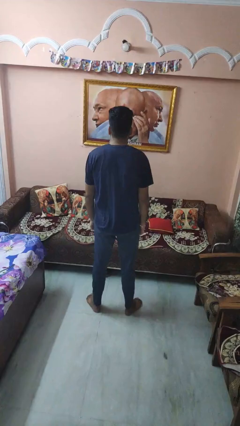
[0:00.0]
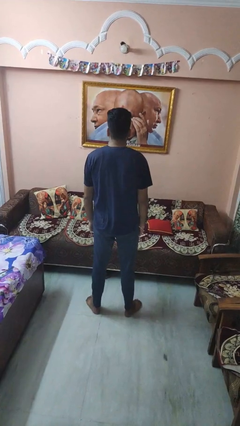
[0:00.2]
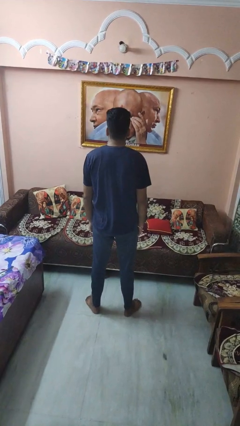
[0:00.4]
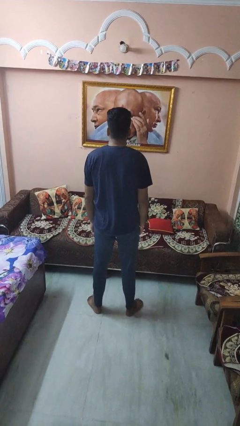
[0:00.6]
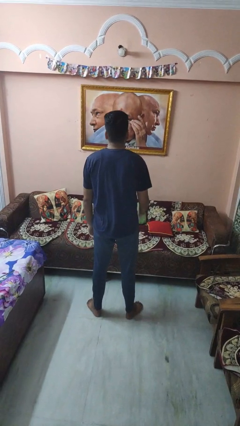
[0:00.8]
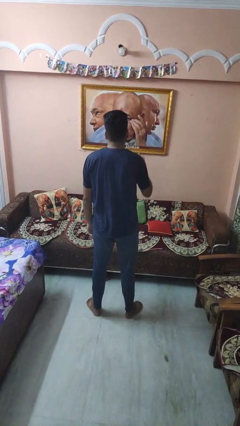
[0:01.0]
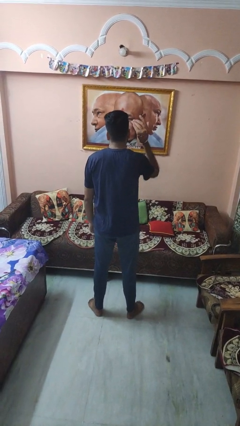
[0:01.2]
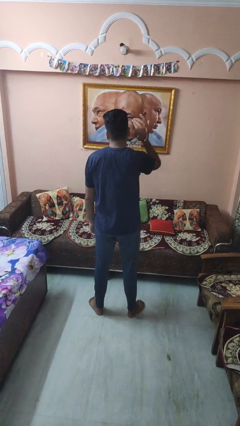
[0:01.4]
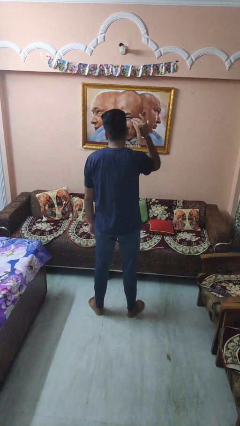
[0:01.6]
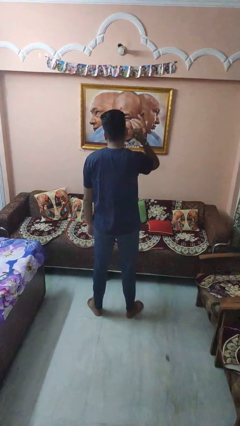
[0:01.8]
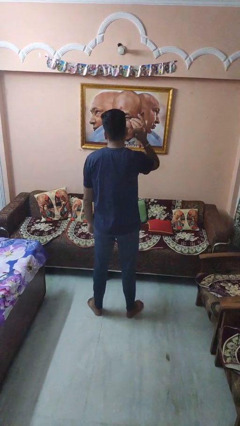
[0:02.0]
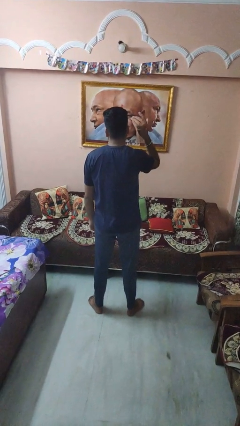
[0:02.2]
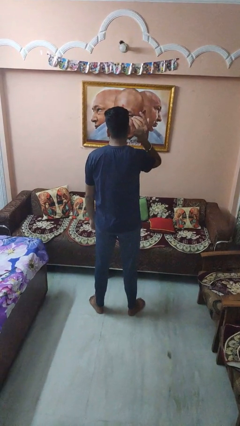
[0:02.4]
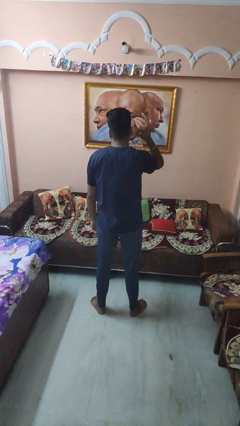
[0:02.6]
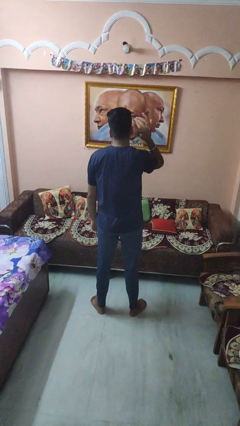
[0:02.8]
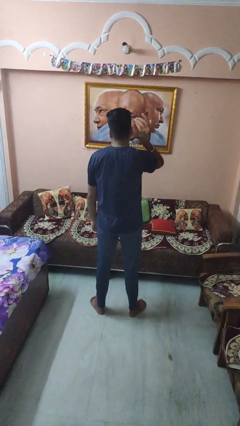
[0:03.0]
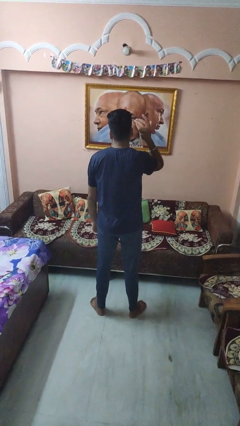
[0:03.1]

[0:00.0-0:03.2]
person gestures behind me

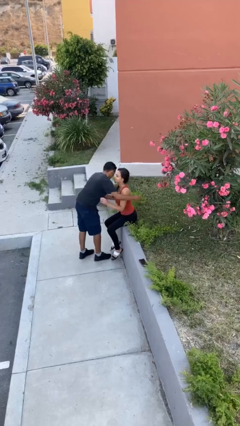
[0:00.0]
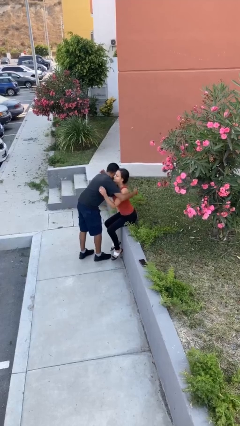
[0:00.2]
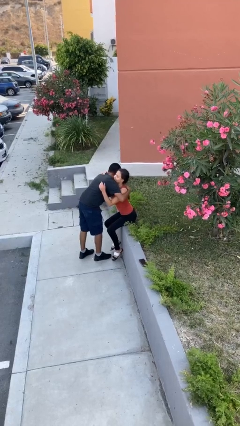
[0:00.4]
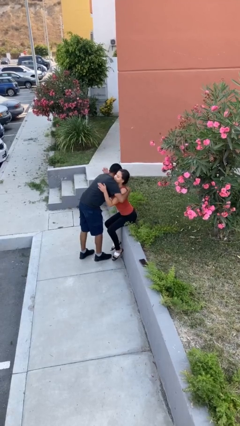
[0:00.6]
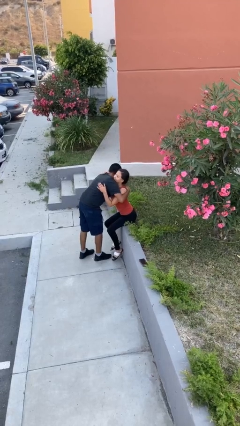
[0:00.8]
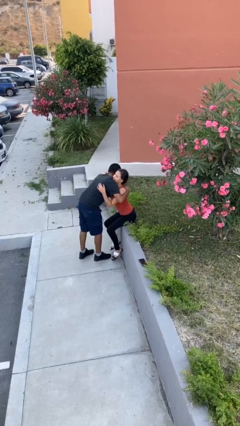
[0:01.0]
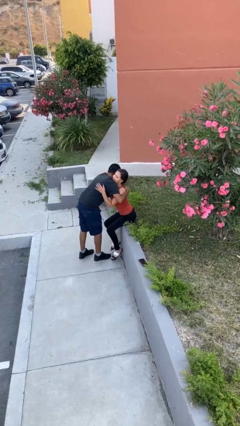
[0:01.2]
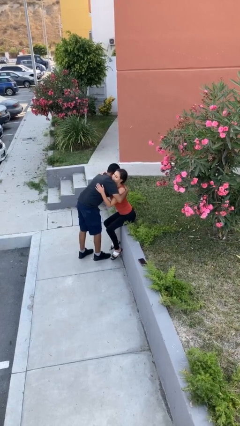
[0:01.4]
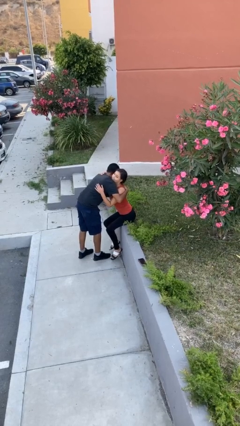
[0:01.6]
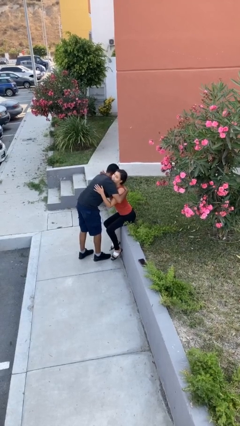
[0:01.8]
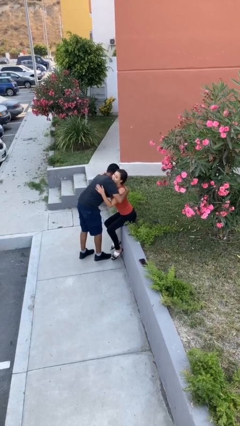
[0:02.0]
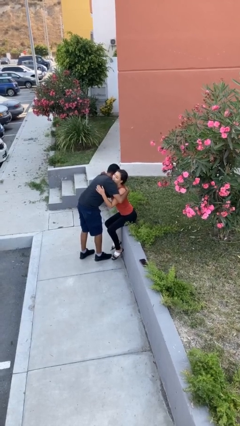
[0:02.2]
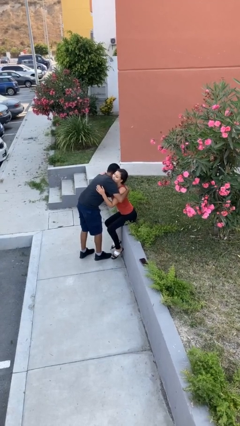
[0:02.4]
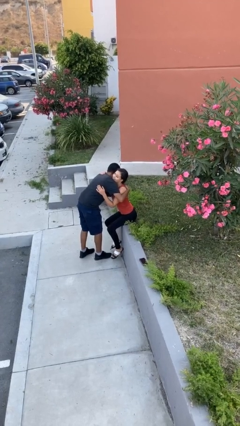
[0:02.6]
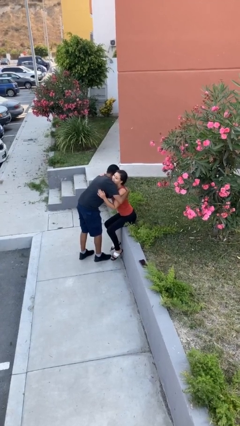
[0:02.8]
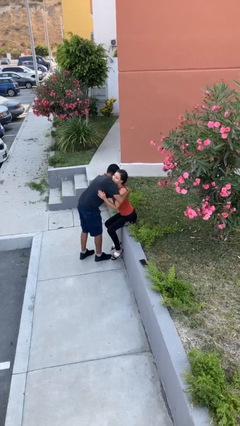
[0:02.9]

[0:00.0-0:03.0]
person embraces person

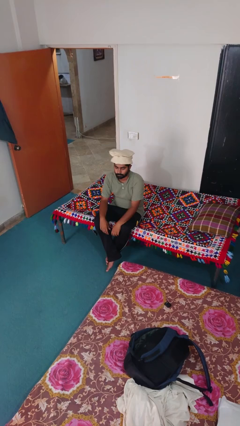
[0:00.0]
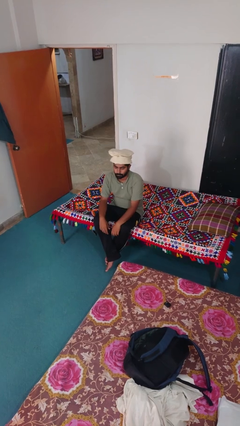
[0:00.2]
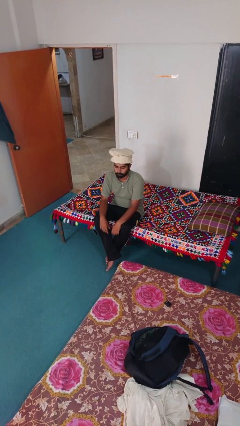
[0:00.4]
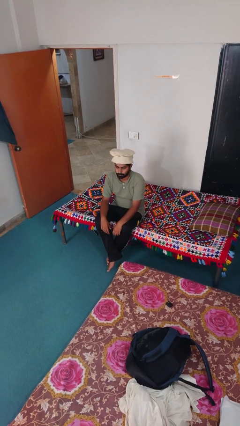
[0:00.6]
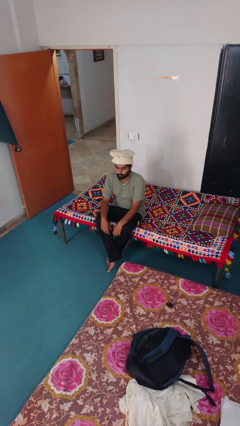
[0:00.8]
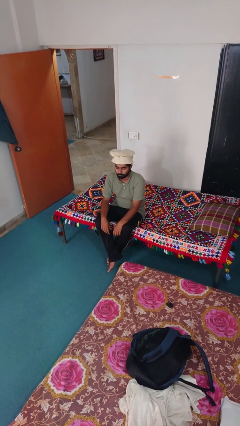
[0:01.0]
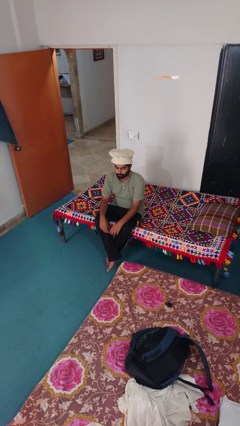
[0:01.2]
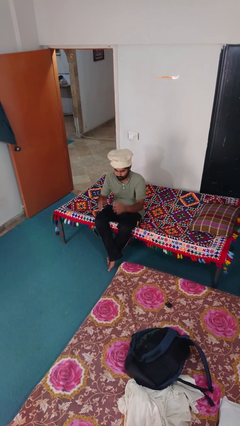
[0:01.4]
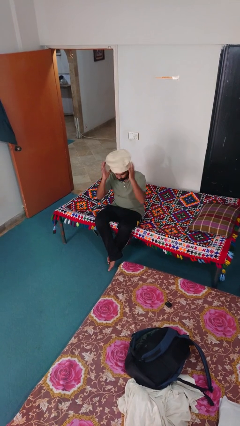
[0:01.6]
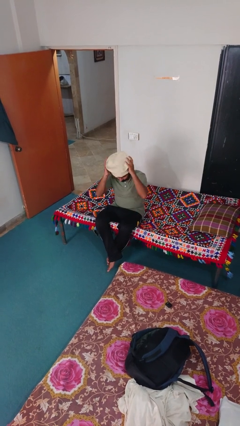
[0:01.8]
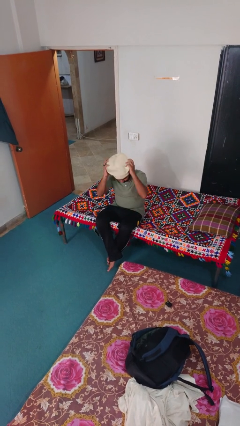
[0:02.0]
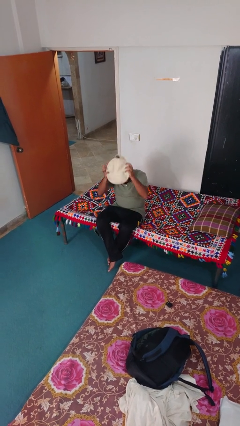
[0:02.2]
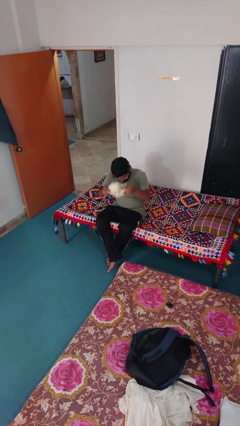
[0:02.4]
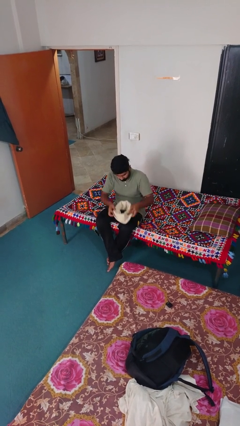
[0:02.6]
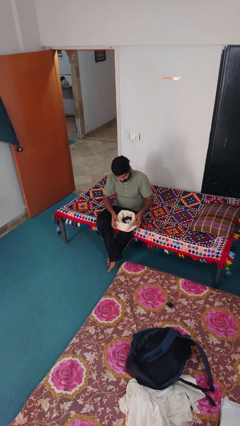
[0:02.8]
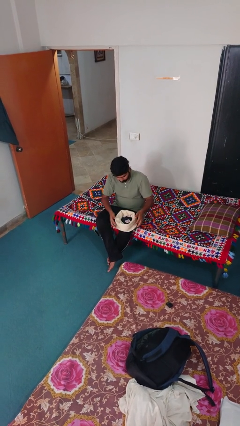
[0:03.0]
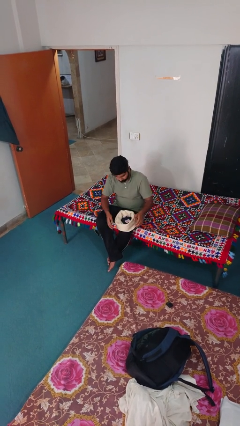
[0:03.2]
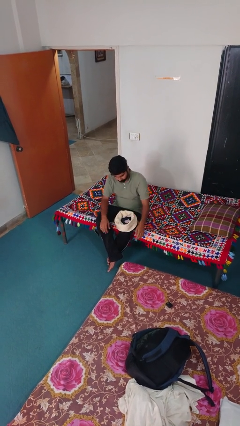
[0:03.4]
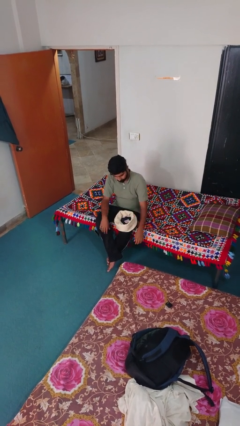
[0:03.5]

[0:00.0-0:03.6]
person takes off hat

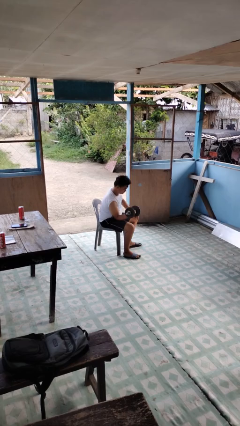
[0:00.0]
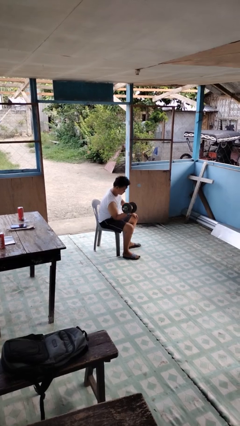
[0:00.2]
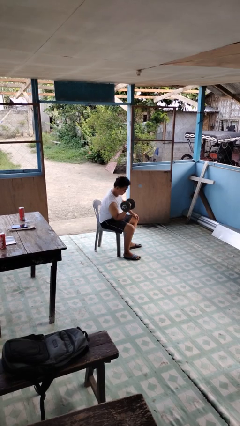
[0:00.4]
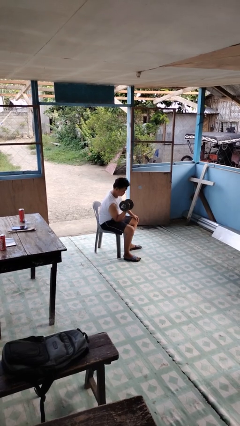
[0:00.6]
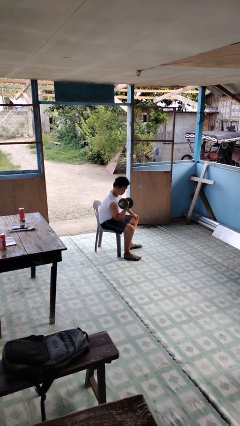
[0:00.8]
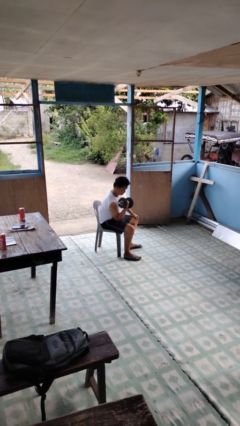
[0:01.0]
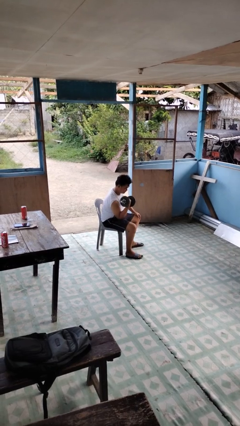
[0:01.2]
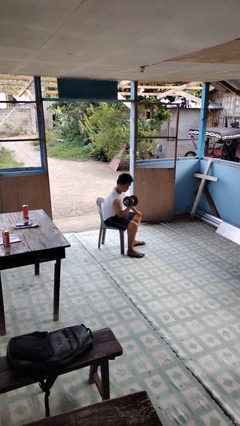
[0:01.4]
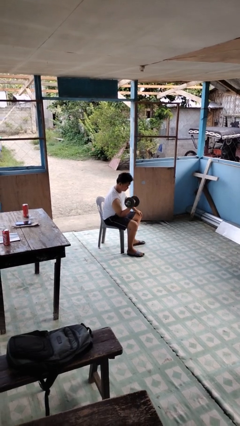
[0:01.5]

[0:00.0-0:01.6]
person lifts dumbbells

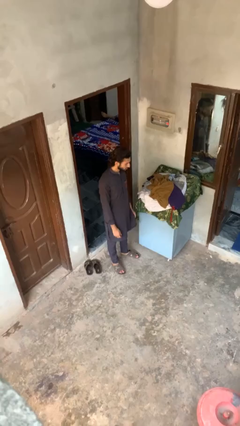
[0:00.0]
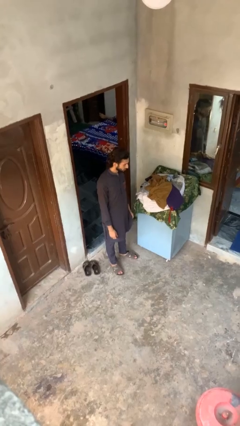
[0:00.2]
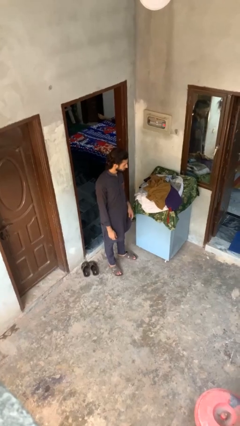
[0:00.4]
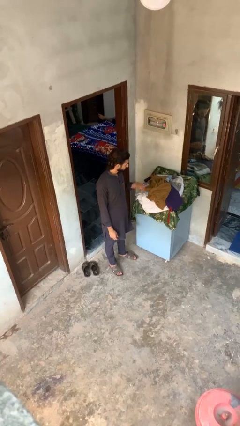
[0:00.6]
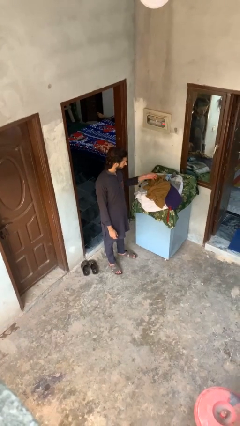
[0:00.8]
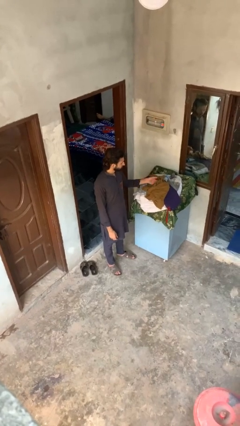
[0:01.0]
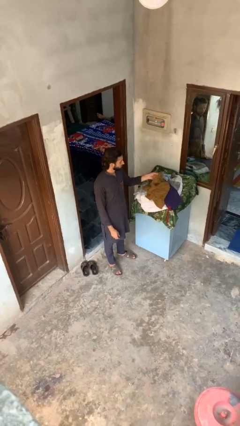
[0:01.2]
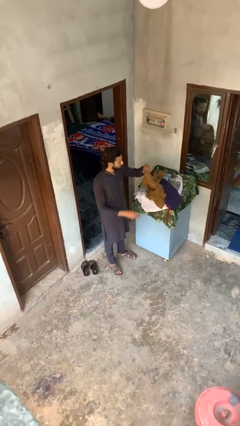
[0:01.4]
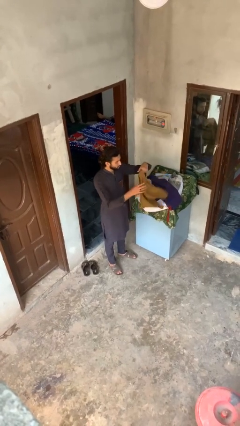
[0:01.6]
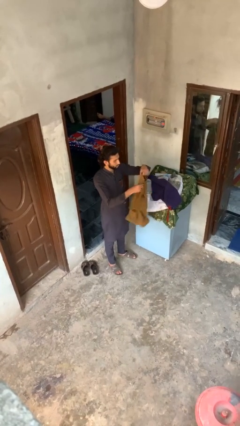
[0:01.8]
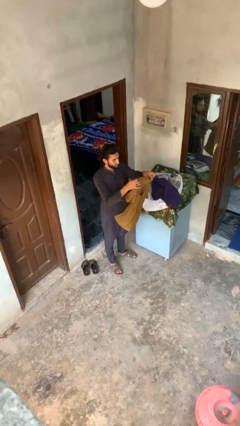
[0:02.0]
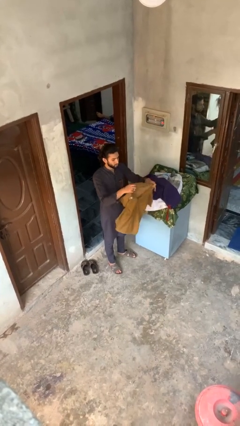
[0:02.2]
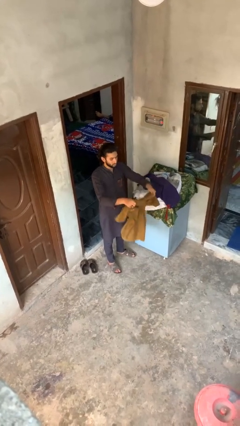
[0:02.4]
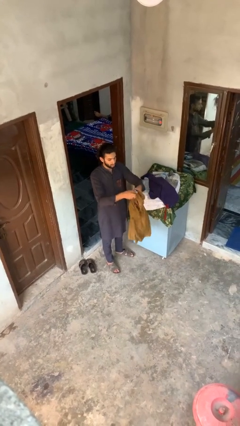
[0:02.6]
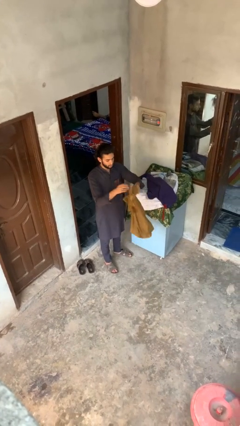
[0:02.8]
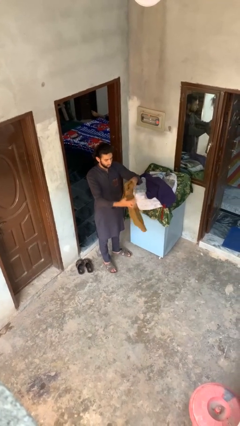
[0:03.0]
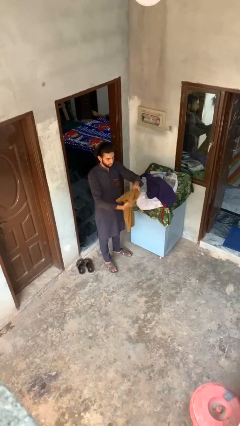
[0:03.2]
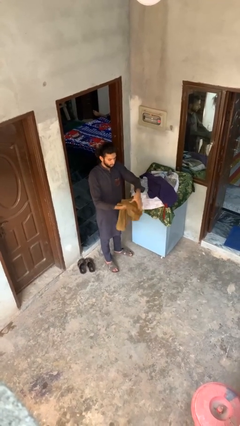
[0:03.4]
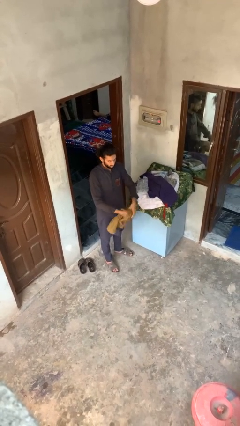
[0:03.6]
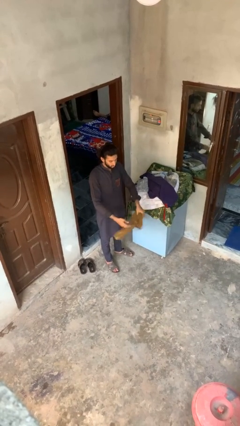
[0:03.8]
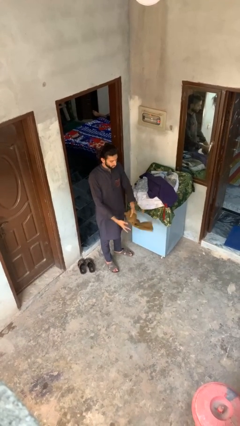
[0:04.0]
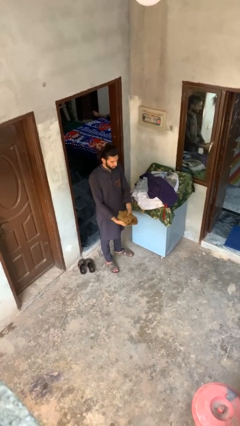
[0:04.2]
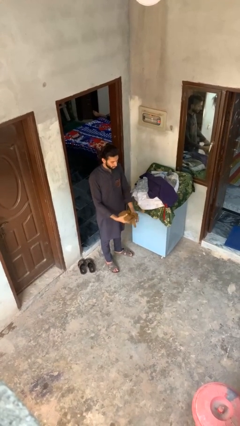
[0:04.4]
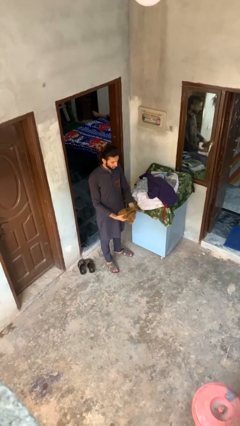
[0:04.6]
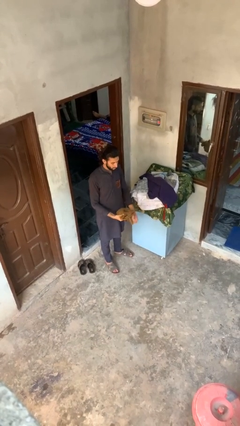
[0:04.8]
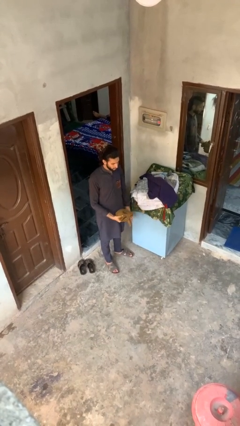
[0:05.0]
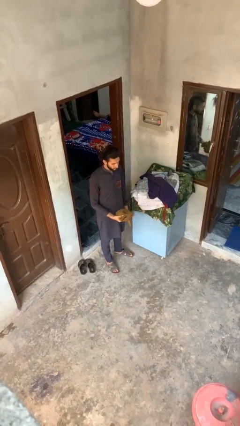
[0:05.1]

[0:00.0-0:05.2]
person folds shirt

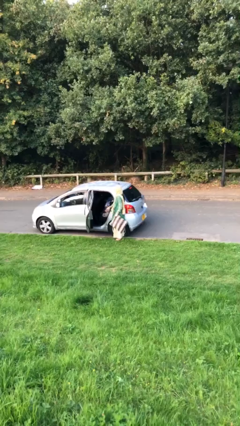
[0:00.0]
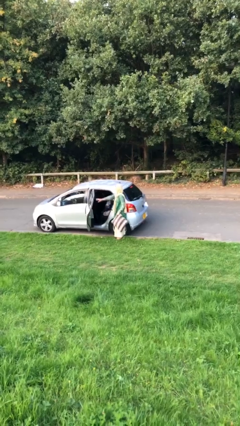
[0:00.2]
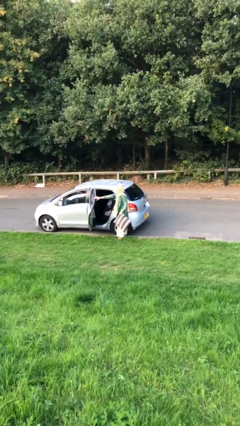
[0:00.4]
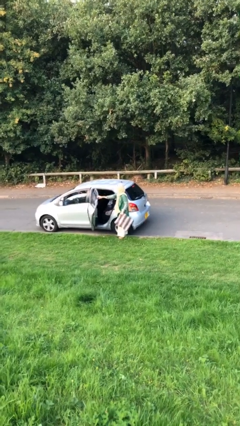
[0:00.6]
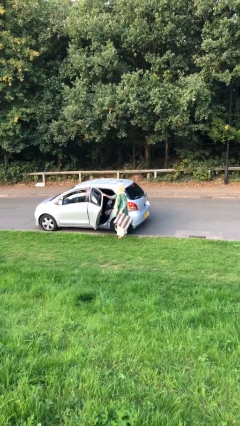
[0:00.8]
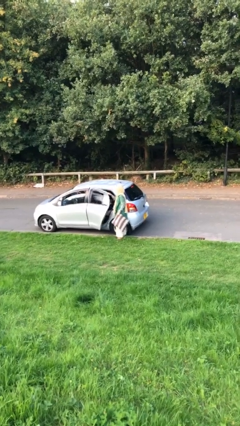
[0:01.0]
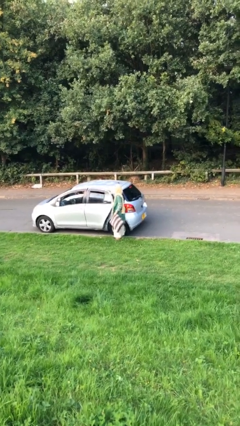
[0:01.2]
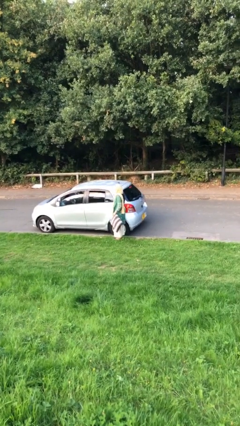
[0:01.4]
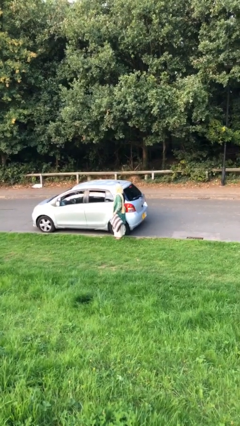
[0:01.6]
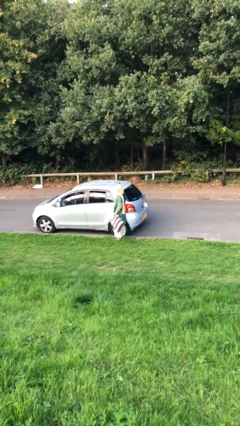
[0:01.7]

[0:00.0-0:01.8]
person closes car door
